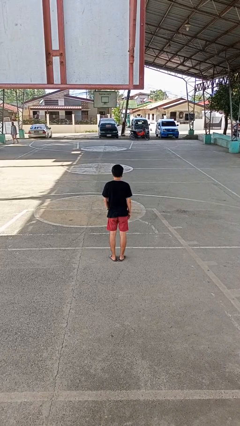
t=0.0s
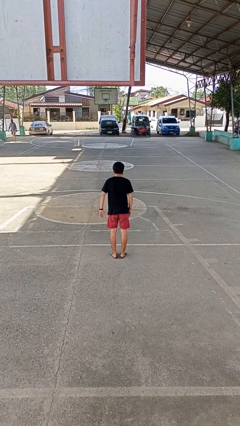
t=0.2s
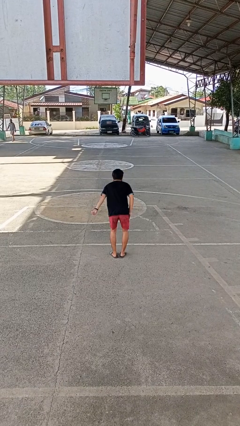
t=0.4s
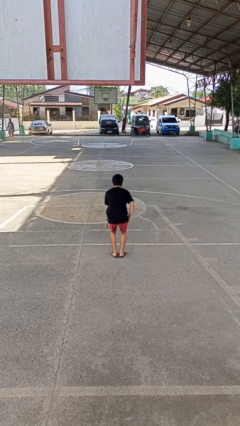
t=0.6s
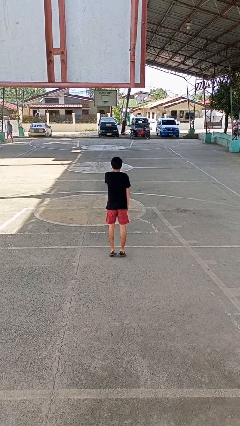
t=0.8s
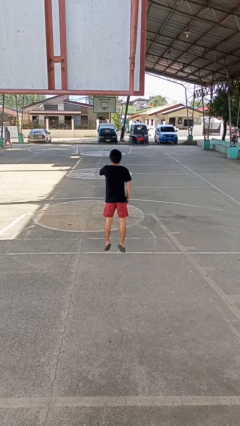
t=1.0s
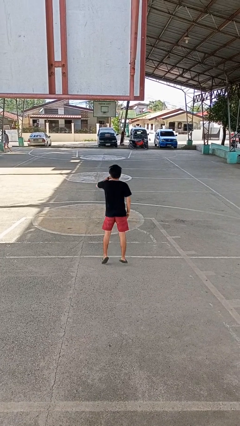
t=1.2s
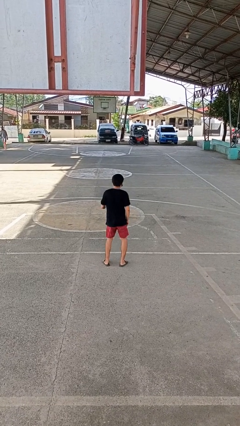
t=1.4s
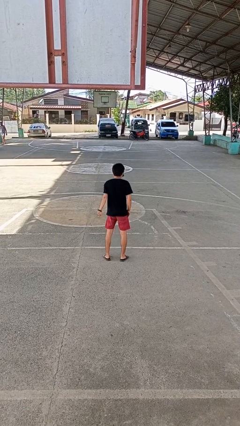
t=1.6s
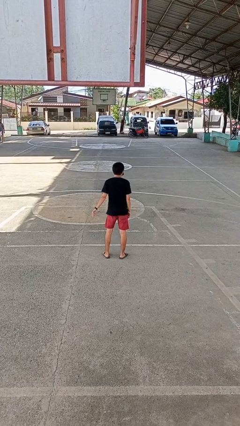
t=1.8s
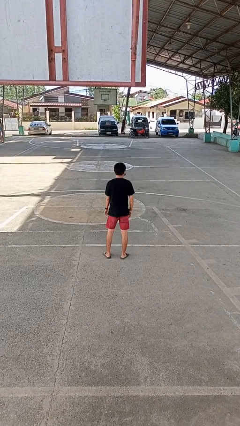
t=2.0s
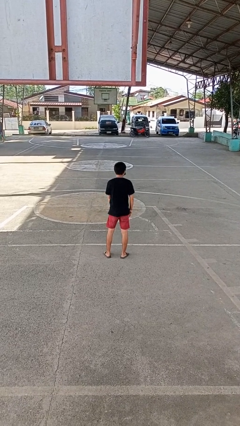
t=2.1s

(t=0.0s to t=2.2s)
person jumps

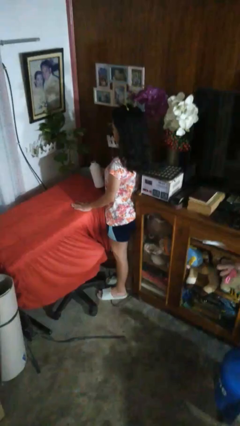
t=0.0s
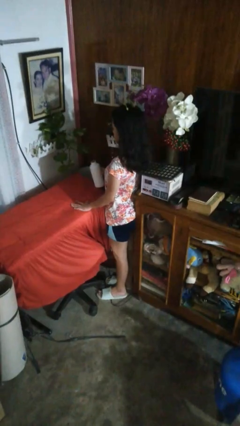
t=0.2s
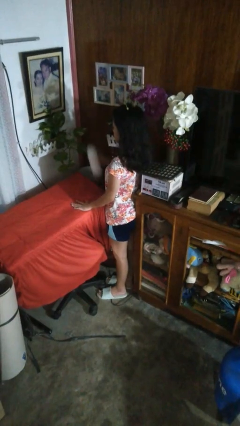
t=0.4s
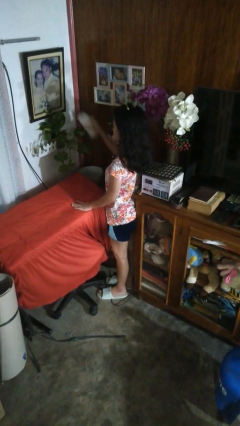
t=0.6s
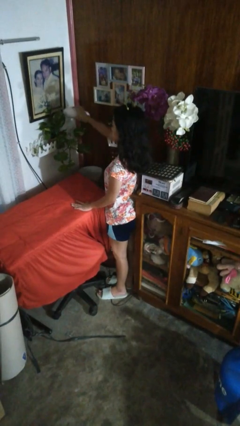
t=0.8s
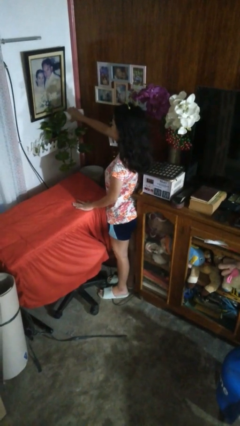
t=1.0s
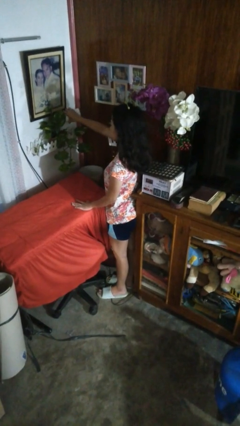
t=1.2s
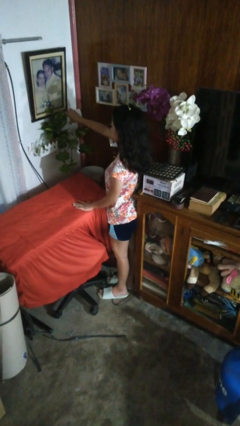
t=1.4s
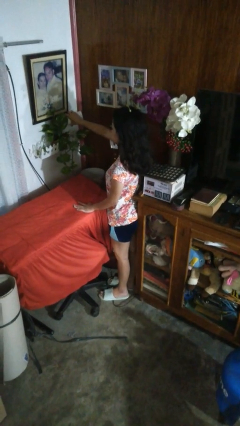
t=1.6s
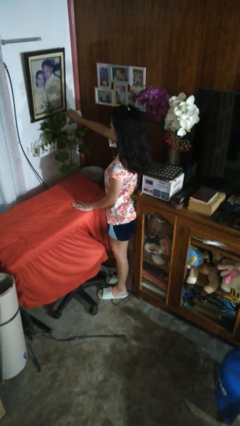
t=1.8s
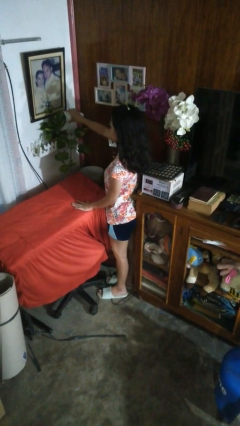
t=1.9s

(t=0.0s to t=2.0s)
person waters houseplant

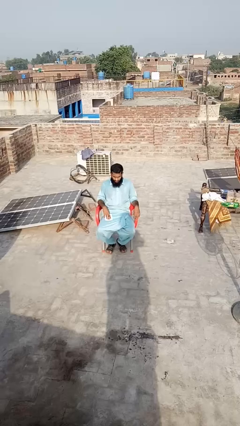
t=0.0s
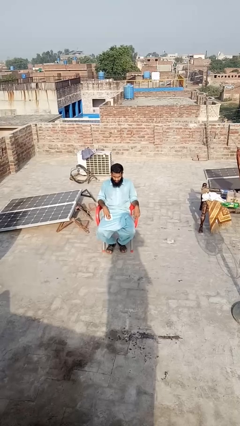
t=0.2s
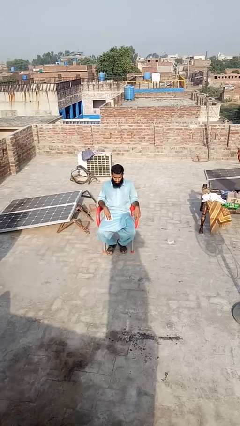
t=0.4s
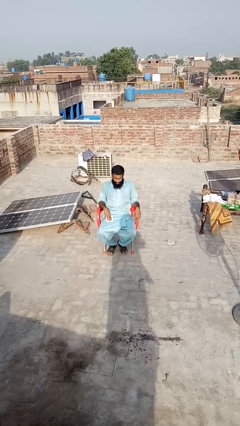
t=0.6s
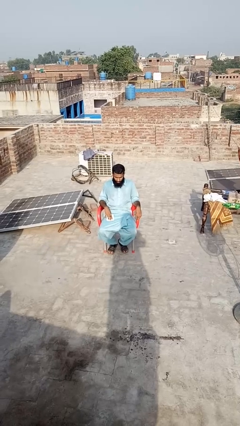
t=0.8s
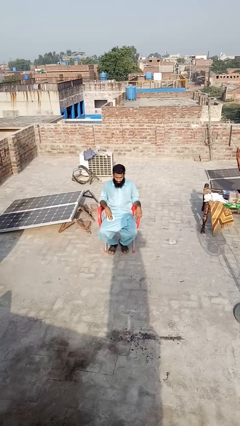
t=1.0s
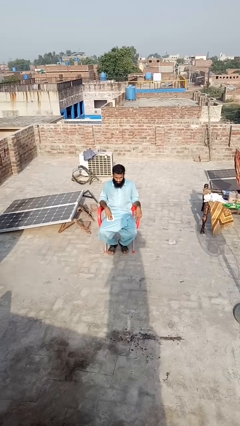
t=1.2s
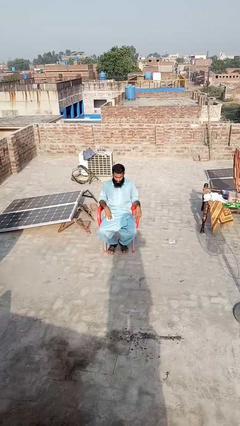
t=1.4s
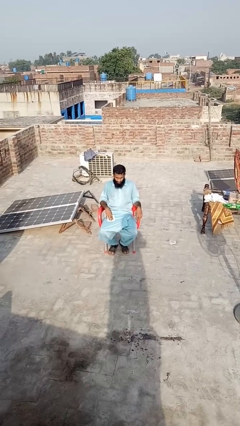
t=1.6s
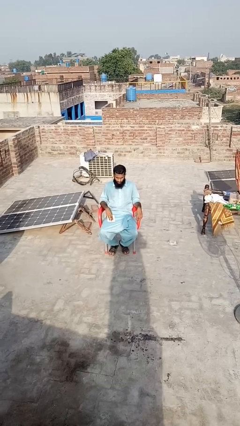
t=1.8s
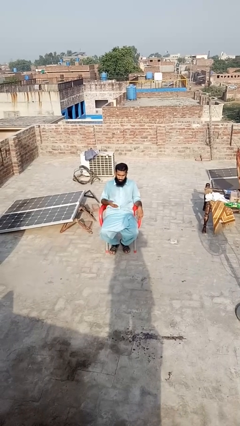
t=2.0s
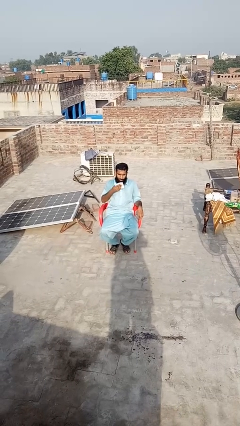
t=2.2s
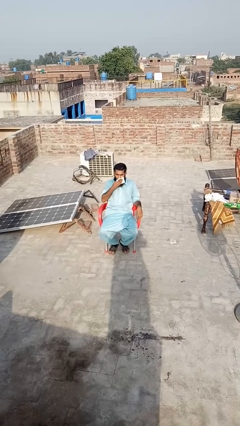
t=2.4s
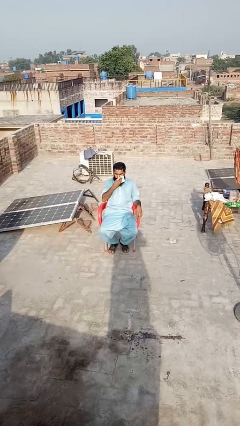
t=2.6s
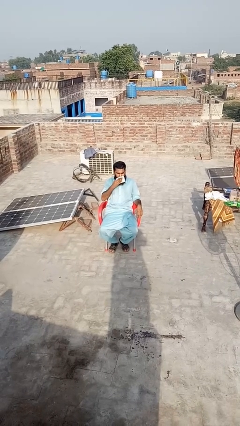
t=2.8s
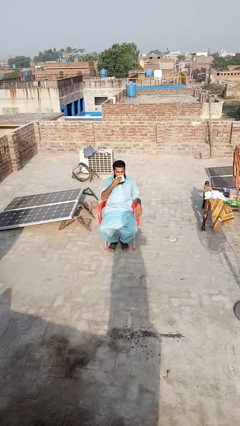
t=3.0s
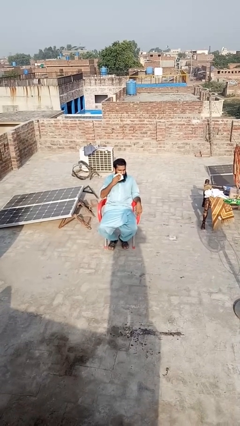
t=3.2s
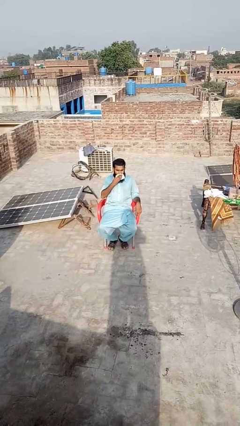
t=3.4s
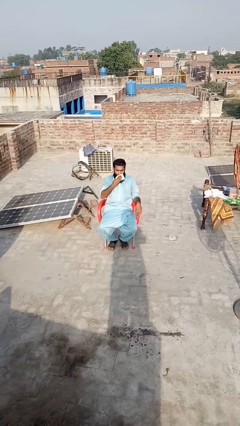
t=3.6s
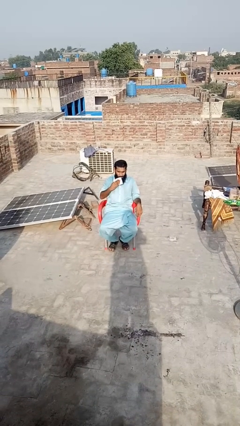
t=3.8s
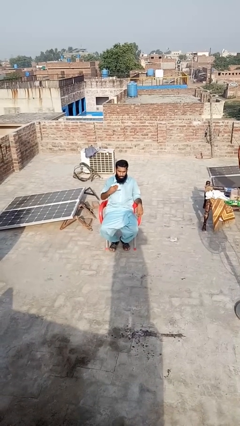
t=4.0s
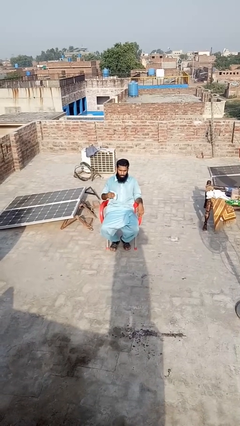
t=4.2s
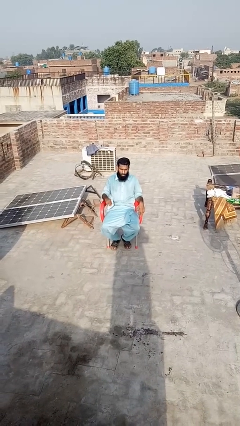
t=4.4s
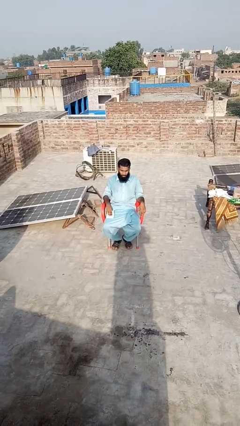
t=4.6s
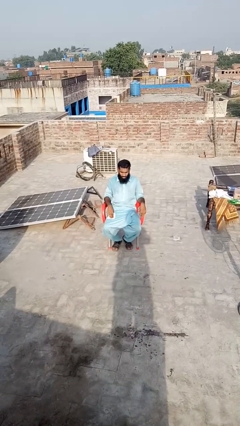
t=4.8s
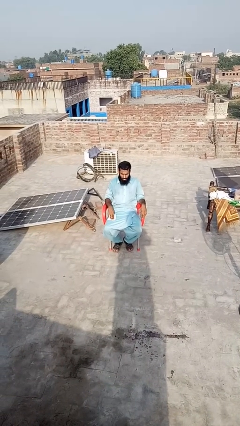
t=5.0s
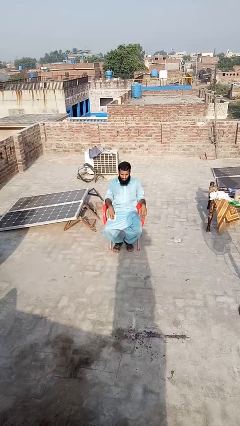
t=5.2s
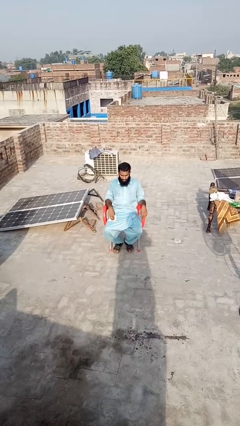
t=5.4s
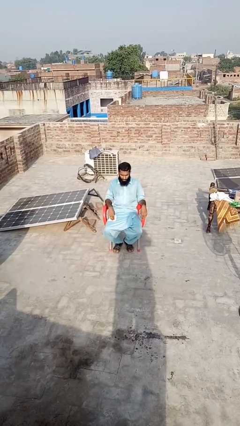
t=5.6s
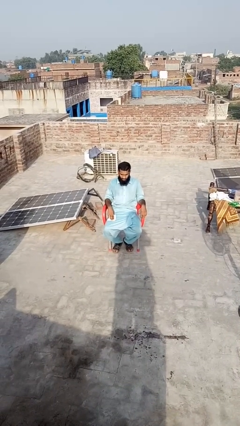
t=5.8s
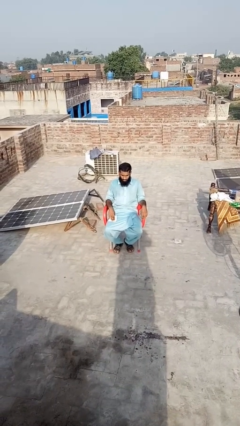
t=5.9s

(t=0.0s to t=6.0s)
person wipes mouth with napkin

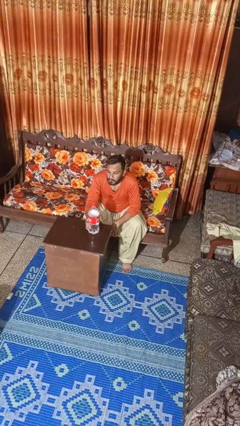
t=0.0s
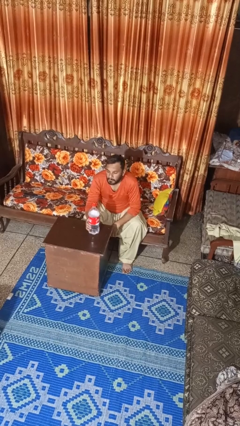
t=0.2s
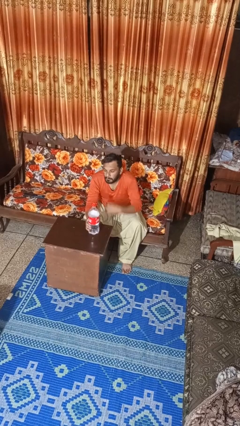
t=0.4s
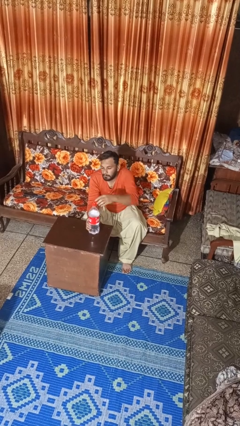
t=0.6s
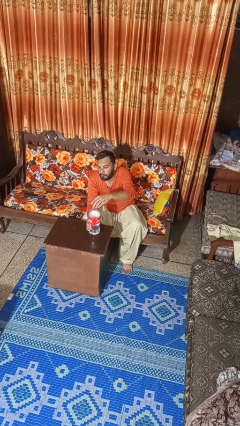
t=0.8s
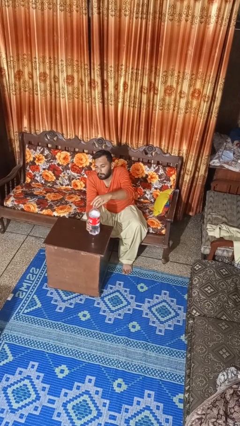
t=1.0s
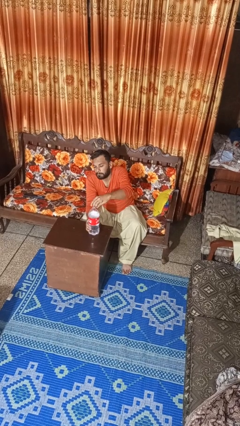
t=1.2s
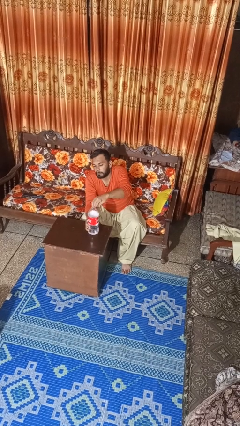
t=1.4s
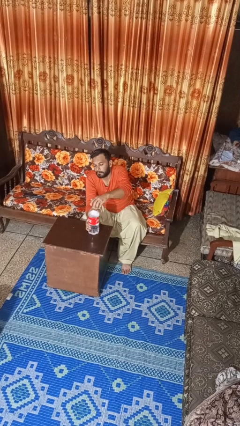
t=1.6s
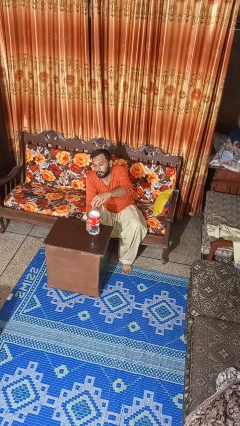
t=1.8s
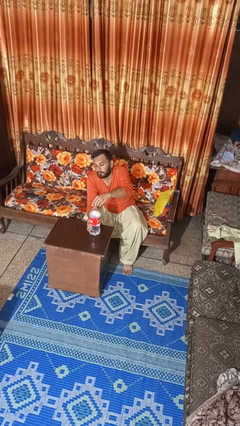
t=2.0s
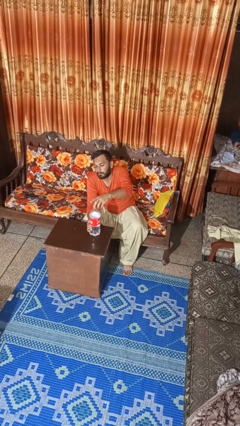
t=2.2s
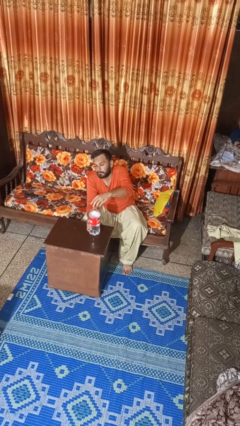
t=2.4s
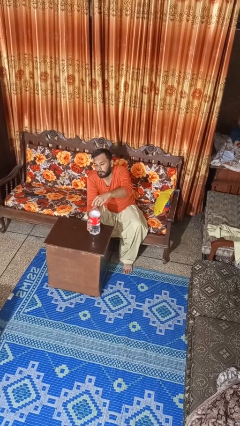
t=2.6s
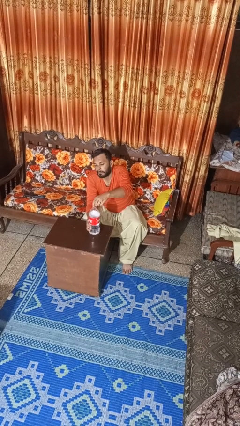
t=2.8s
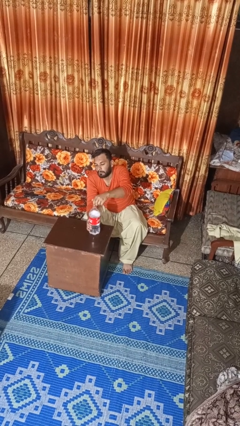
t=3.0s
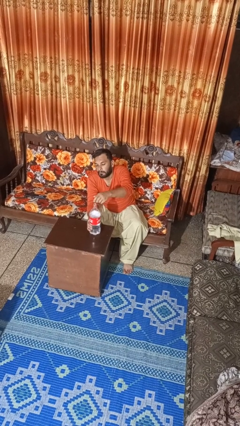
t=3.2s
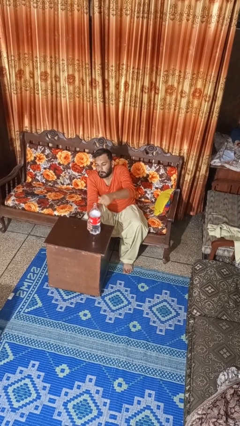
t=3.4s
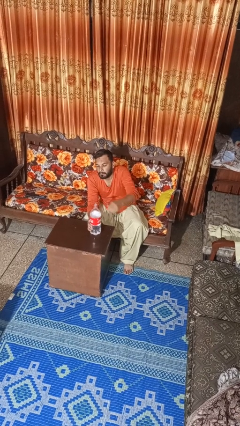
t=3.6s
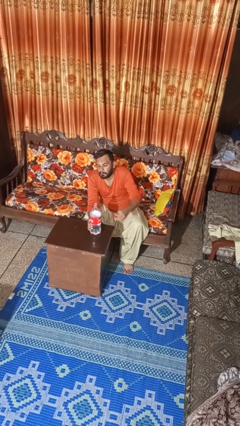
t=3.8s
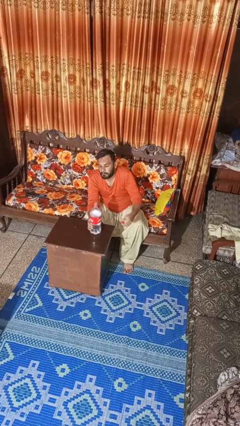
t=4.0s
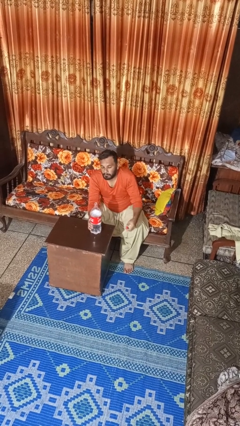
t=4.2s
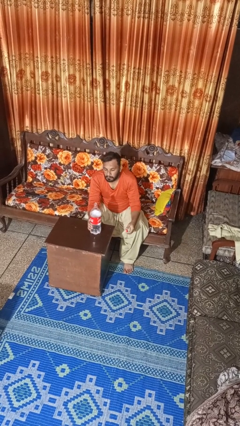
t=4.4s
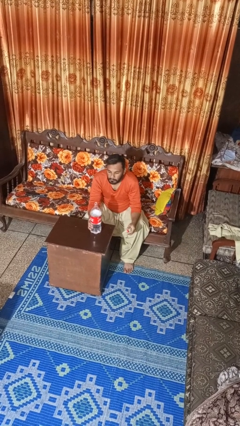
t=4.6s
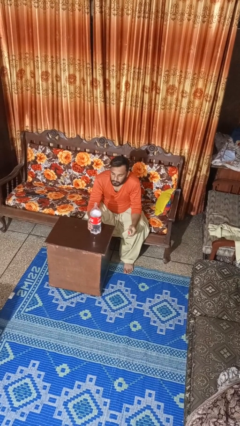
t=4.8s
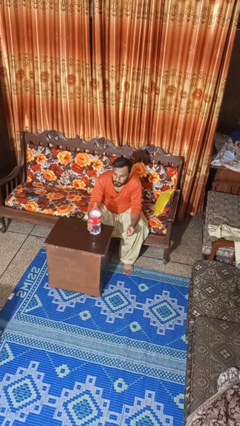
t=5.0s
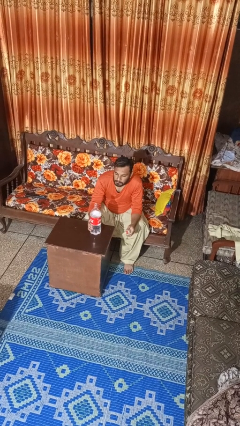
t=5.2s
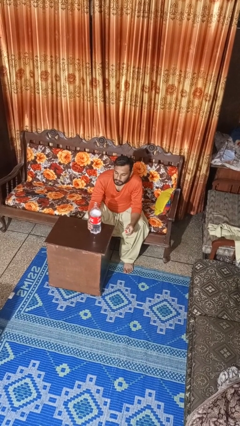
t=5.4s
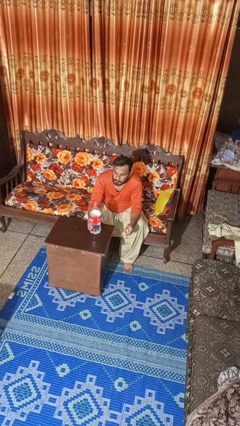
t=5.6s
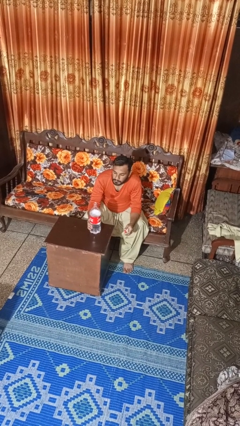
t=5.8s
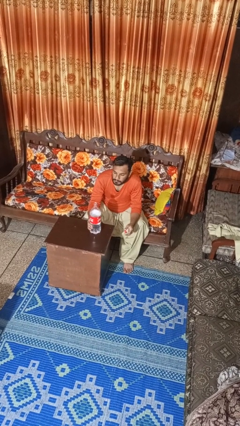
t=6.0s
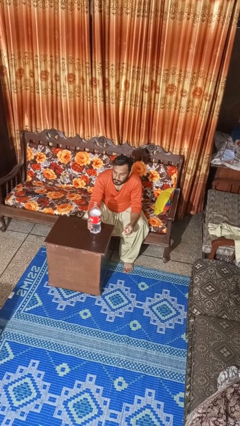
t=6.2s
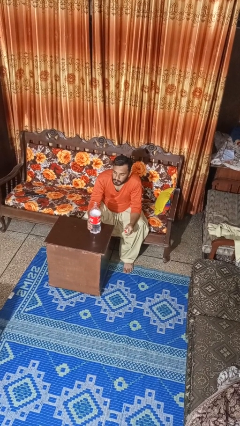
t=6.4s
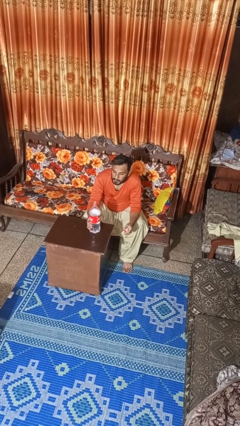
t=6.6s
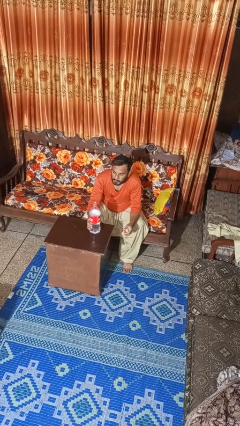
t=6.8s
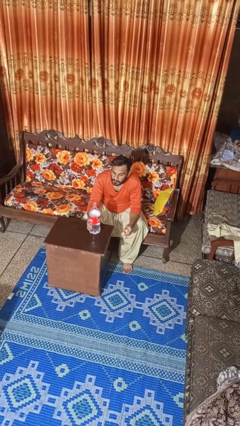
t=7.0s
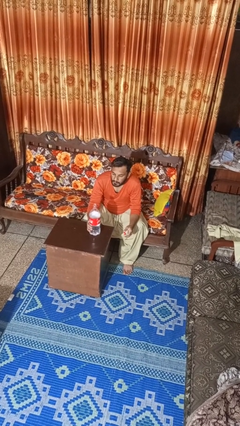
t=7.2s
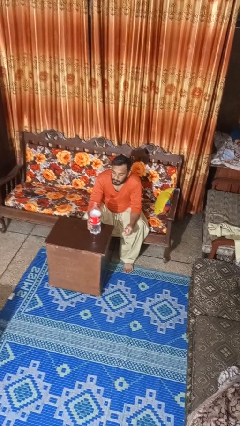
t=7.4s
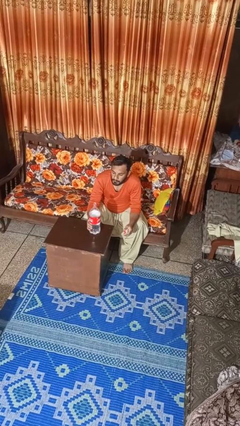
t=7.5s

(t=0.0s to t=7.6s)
person unscrews lid from bottle

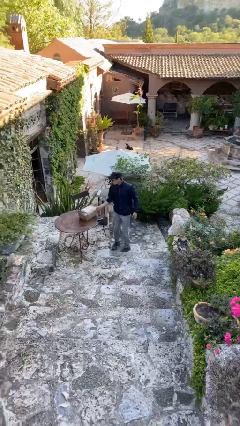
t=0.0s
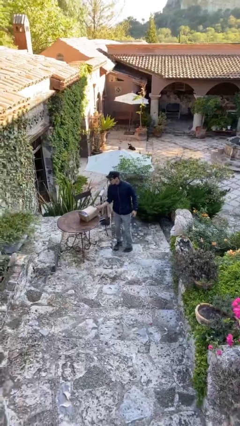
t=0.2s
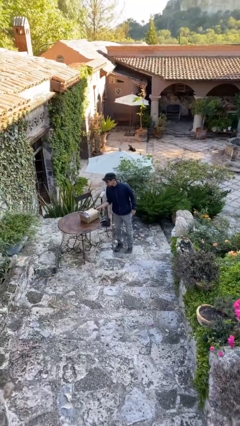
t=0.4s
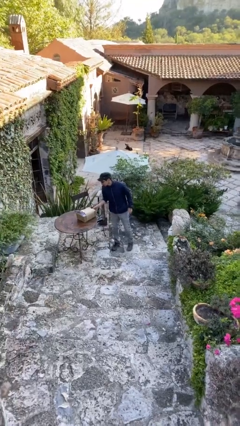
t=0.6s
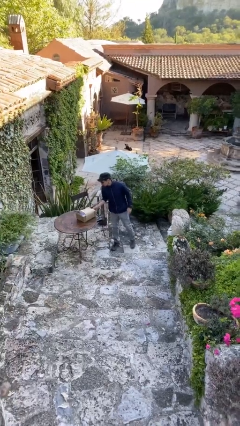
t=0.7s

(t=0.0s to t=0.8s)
person puts down object on table
